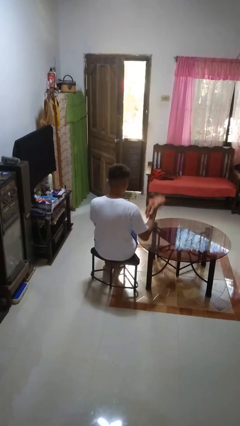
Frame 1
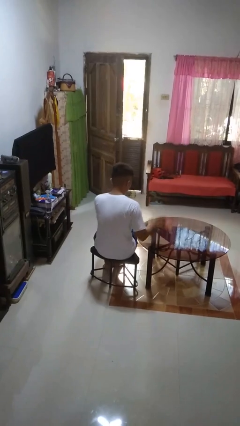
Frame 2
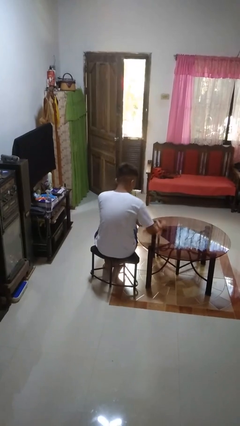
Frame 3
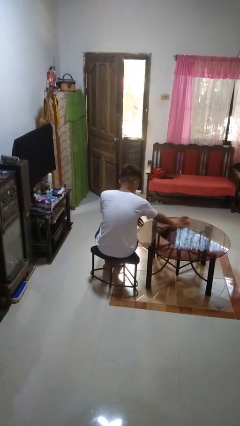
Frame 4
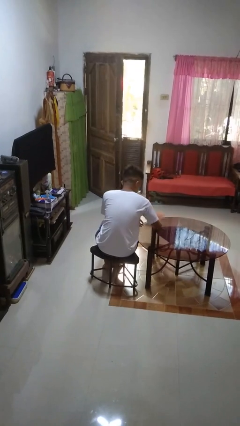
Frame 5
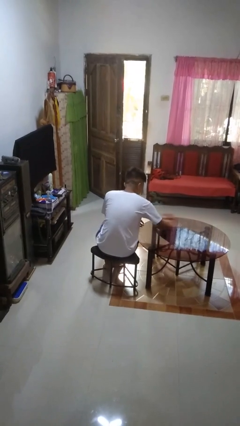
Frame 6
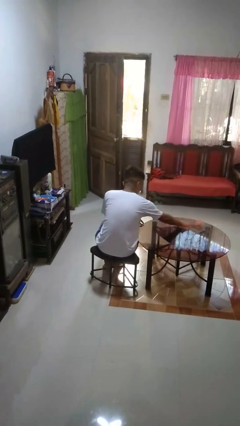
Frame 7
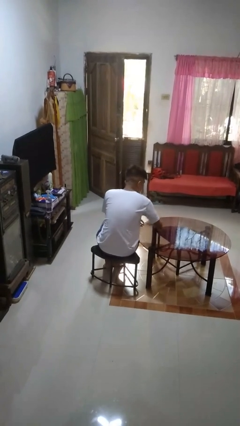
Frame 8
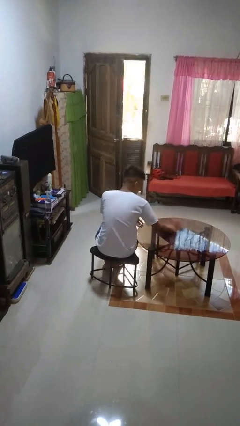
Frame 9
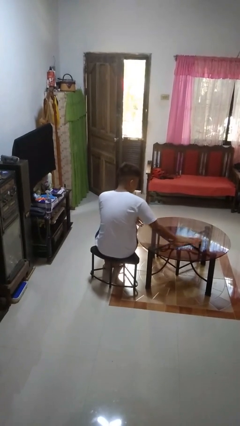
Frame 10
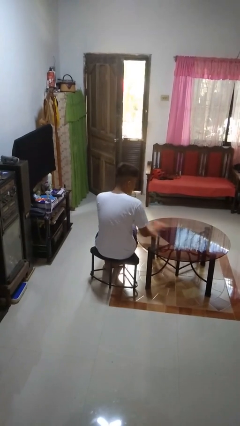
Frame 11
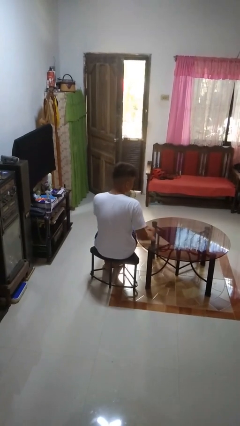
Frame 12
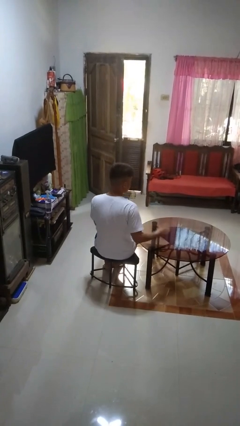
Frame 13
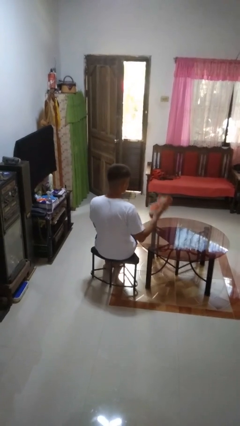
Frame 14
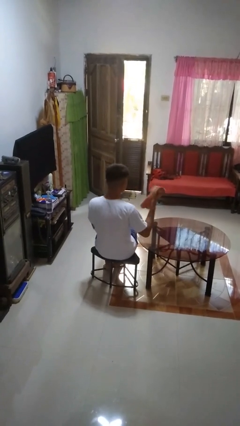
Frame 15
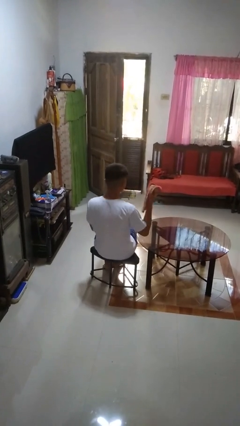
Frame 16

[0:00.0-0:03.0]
person cleans table with rag

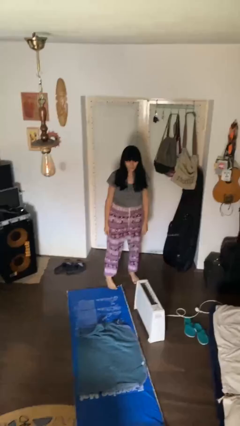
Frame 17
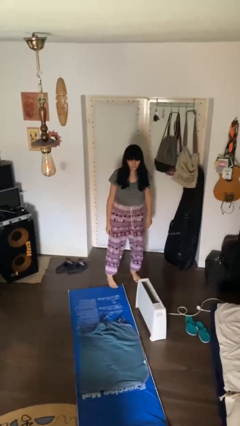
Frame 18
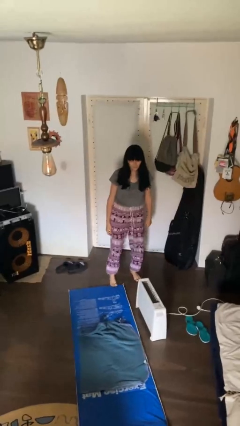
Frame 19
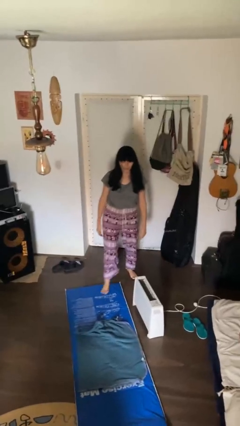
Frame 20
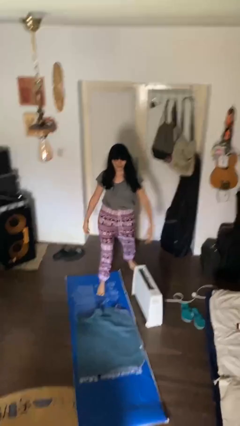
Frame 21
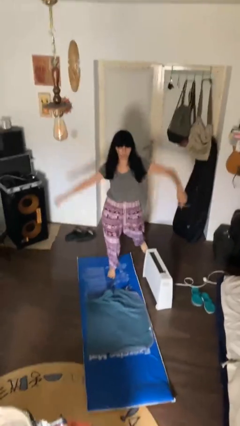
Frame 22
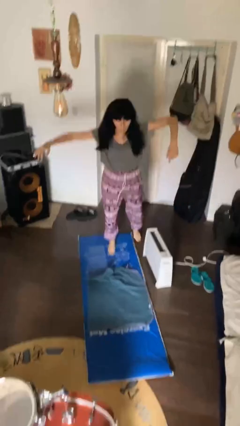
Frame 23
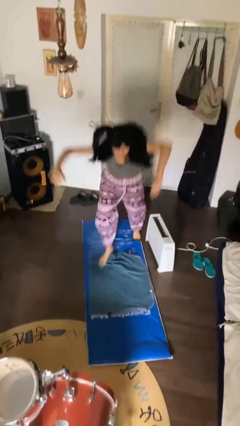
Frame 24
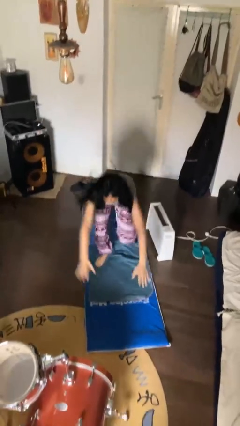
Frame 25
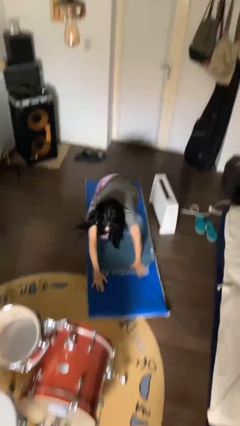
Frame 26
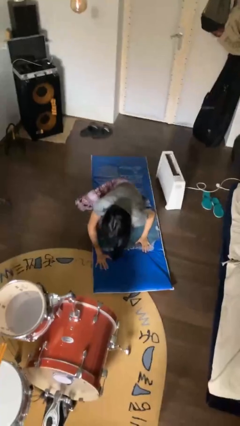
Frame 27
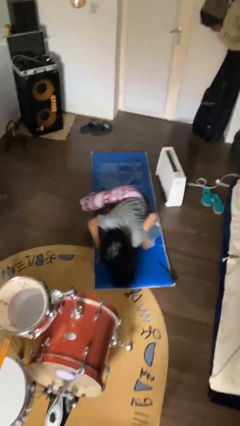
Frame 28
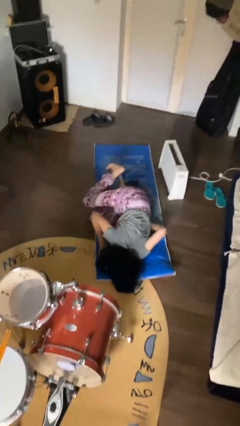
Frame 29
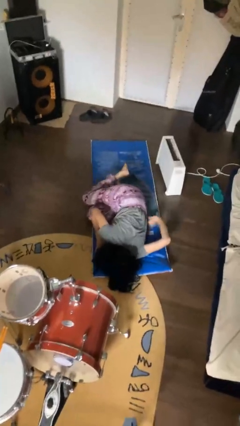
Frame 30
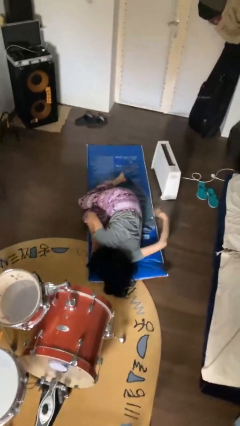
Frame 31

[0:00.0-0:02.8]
person trips on object on floor

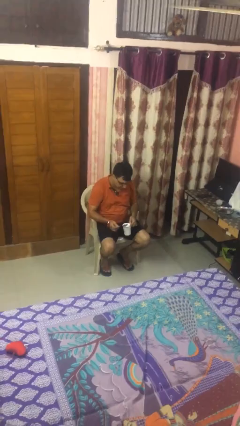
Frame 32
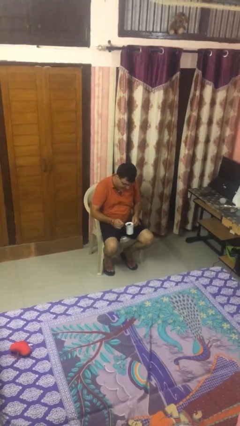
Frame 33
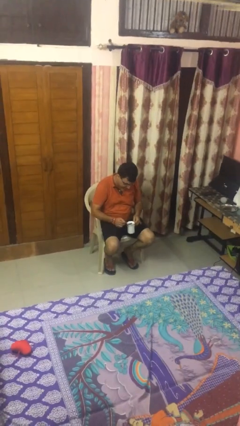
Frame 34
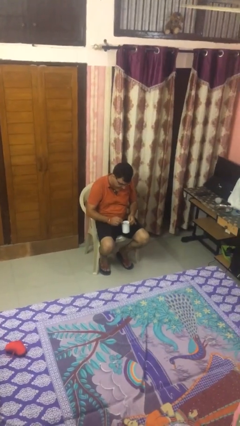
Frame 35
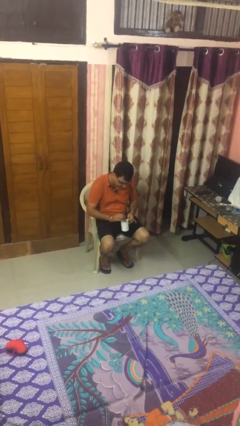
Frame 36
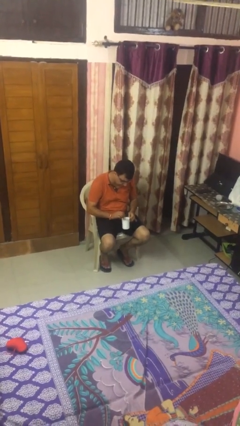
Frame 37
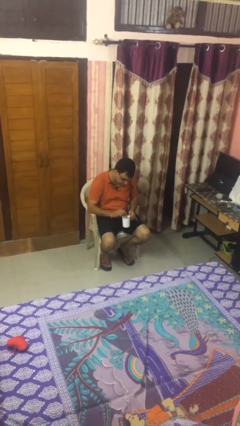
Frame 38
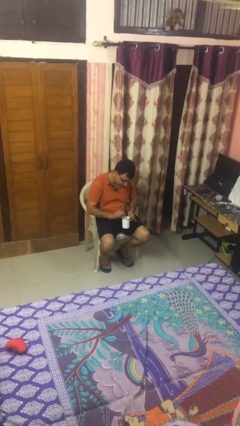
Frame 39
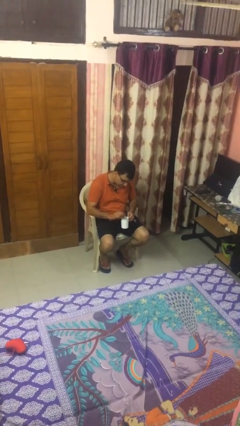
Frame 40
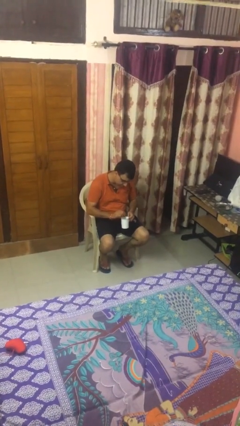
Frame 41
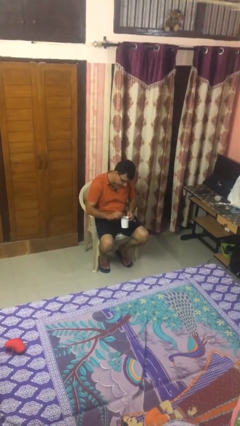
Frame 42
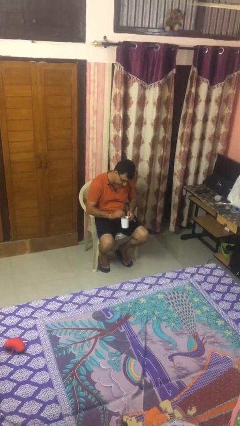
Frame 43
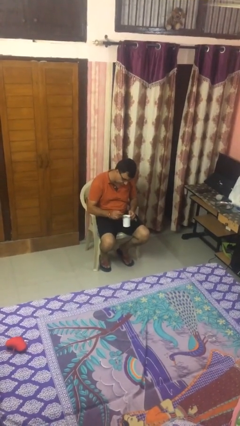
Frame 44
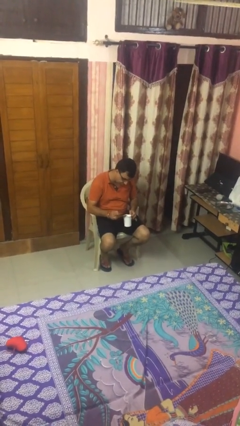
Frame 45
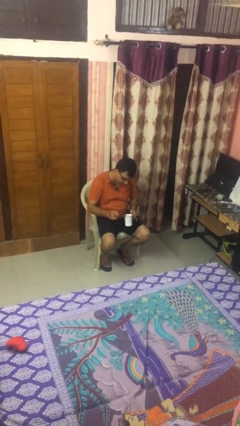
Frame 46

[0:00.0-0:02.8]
person stirs mug

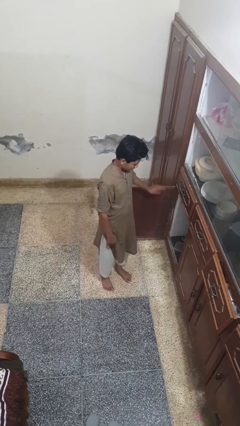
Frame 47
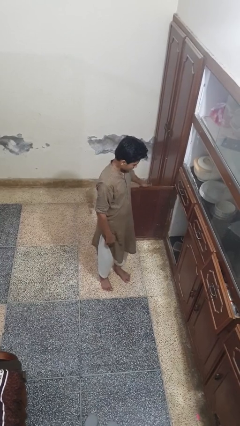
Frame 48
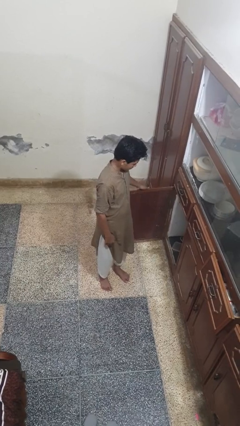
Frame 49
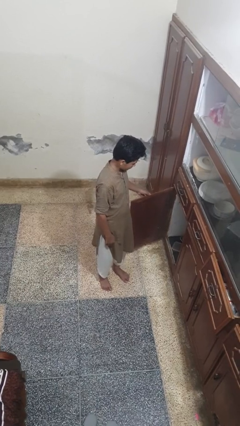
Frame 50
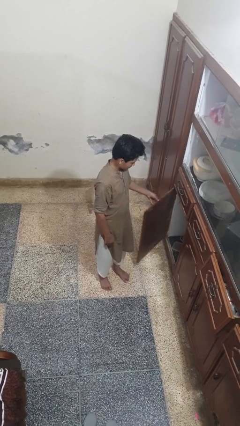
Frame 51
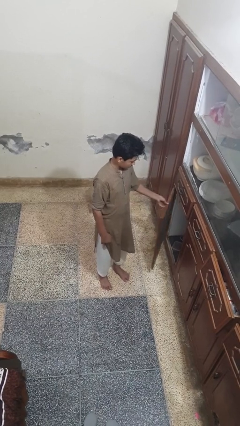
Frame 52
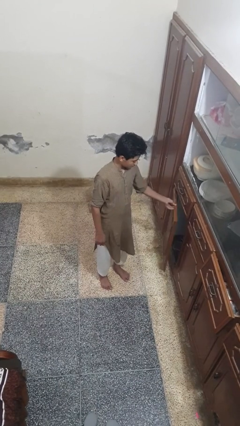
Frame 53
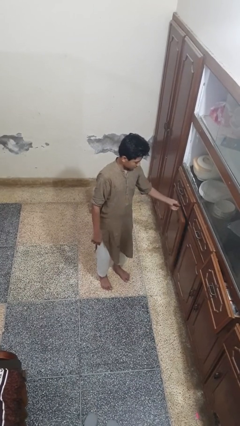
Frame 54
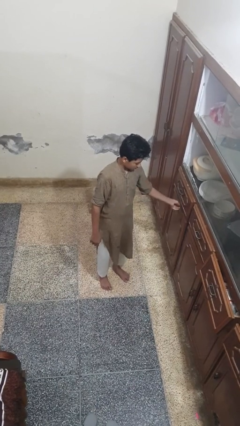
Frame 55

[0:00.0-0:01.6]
person closes cabinet

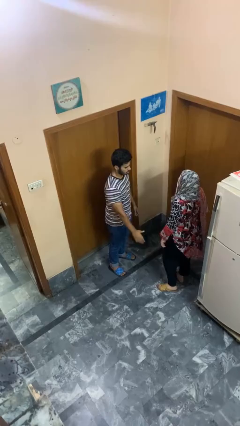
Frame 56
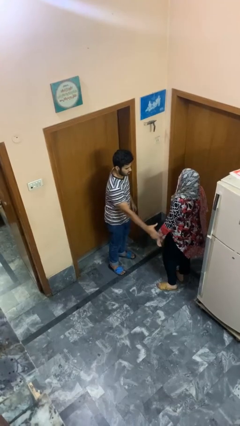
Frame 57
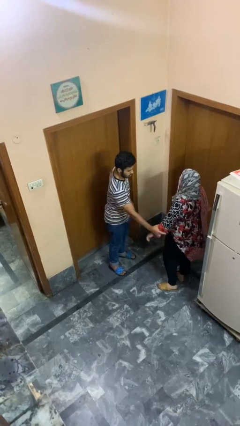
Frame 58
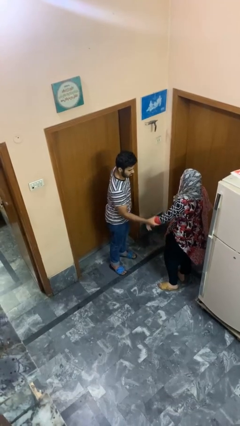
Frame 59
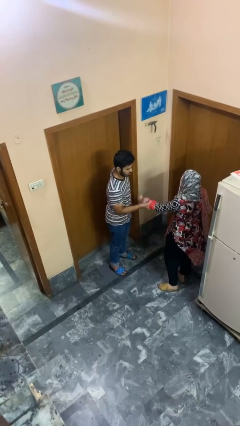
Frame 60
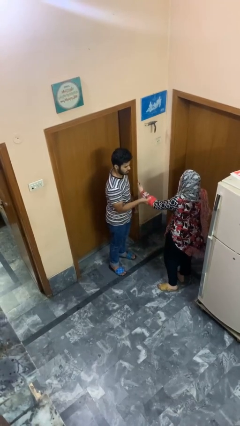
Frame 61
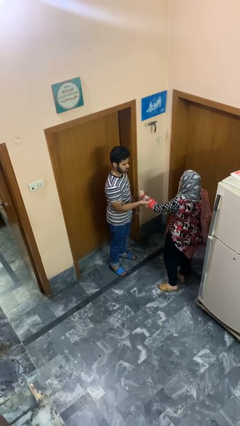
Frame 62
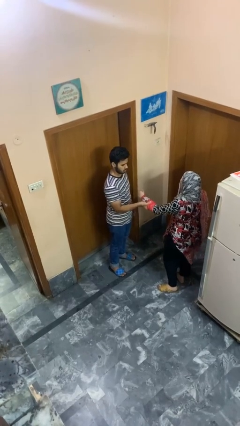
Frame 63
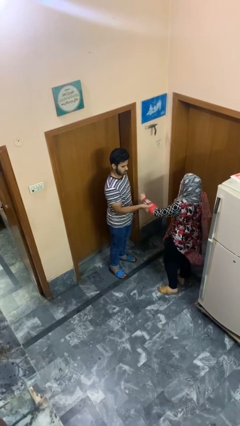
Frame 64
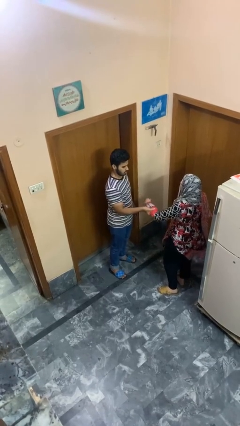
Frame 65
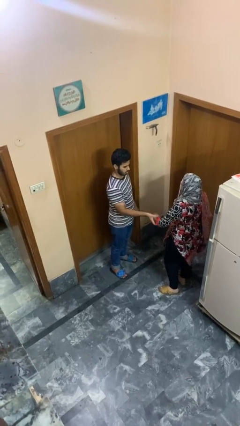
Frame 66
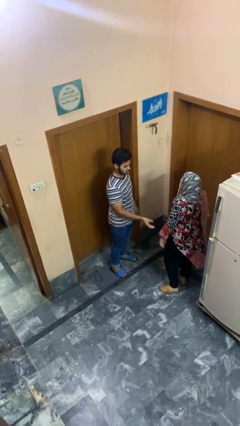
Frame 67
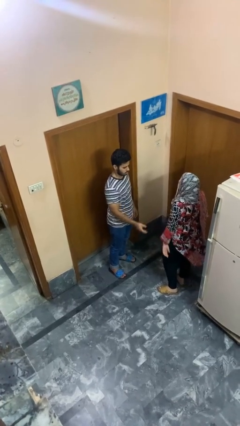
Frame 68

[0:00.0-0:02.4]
person grabs person by forearm

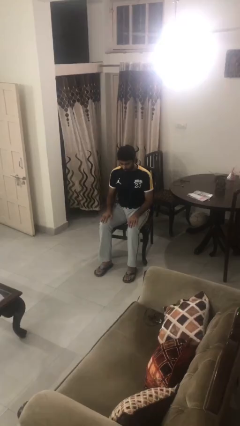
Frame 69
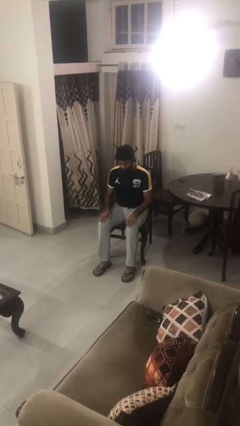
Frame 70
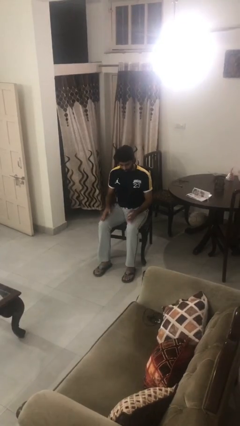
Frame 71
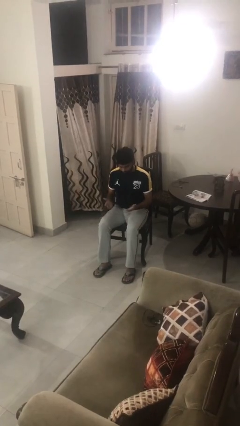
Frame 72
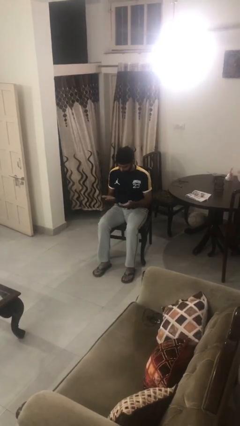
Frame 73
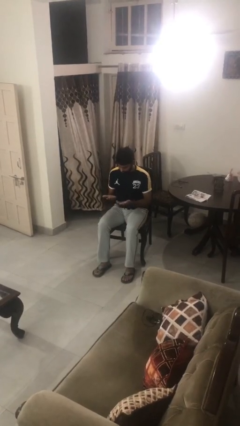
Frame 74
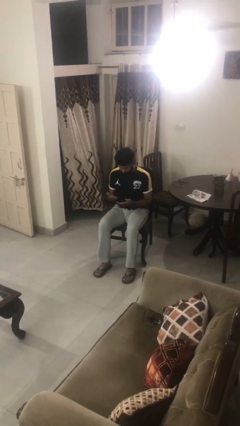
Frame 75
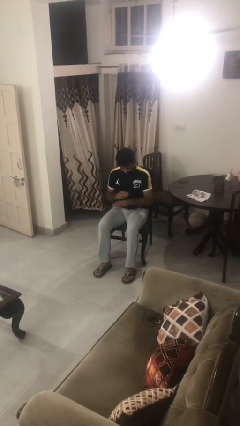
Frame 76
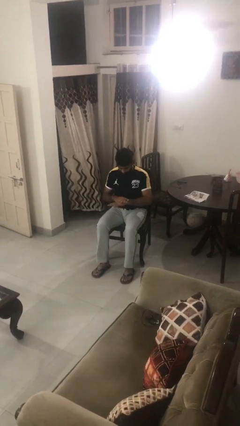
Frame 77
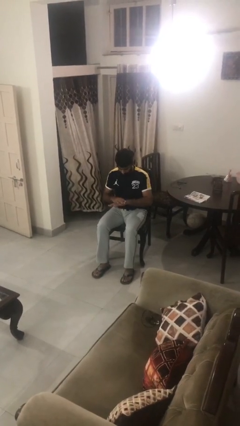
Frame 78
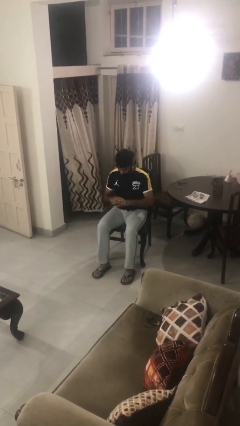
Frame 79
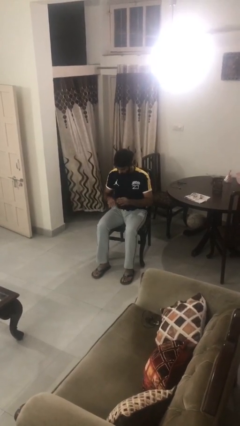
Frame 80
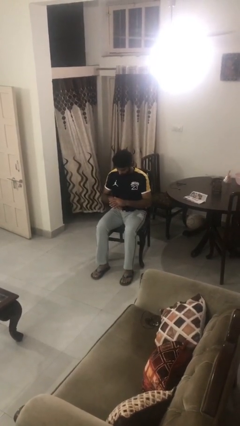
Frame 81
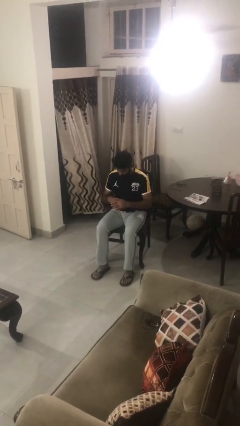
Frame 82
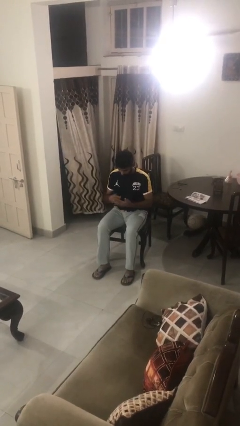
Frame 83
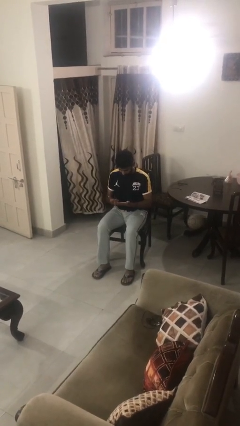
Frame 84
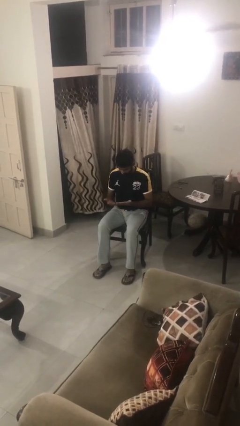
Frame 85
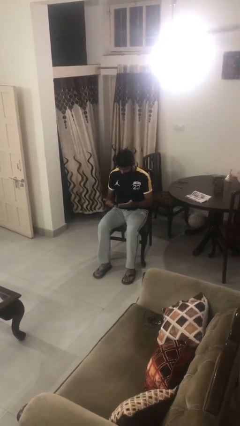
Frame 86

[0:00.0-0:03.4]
person looks at hands in lap

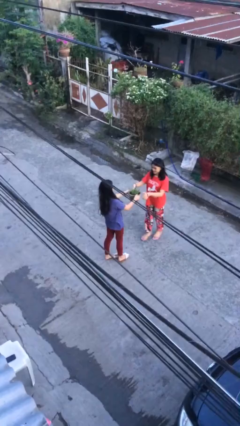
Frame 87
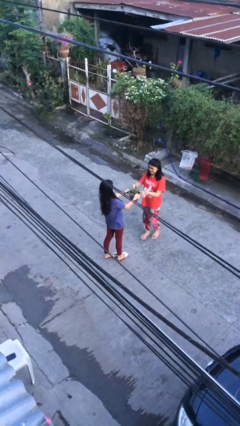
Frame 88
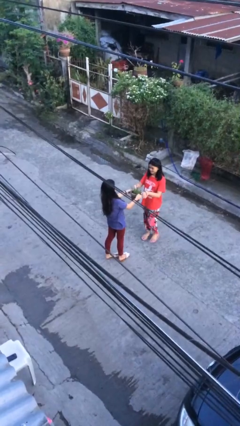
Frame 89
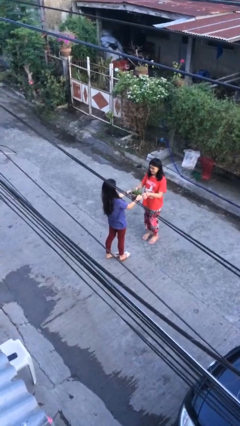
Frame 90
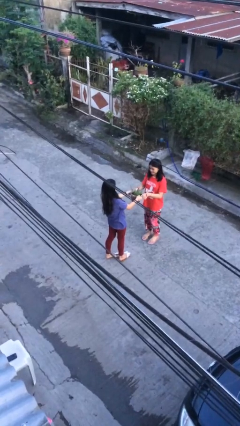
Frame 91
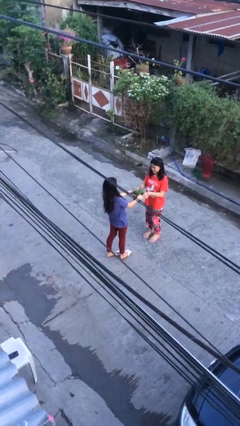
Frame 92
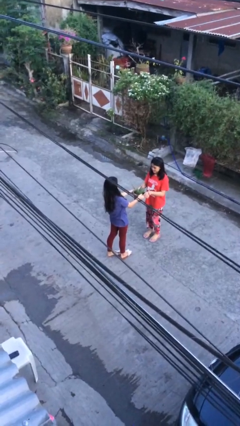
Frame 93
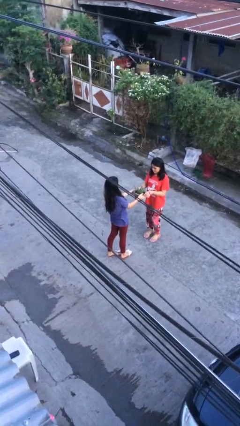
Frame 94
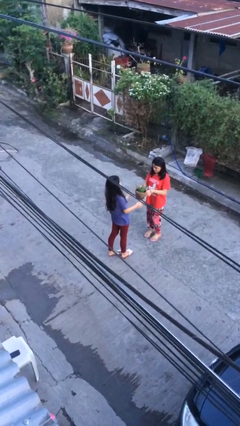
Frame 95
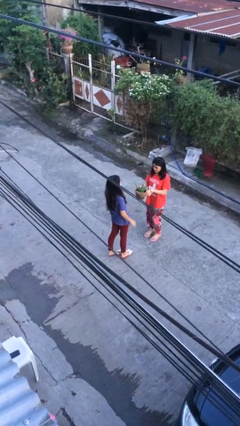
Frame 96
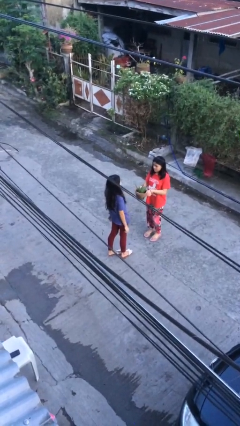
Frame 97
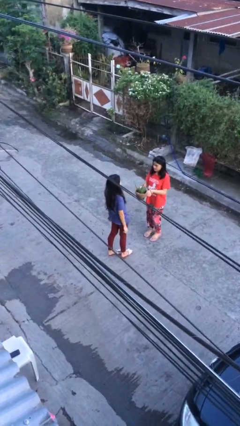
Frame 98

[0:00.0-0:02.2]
person transfers object to person
